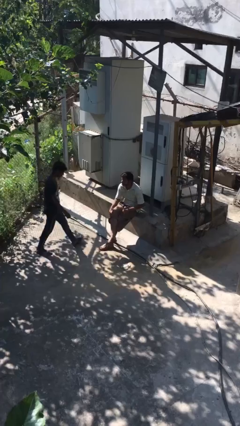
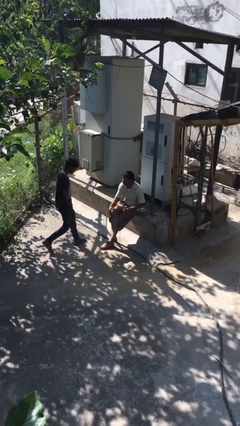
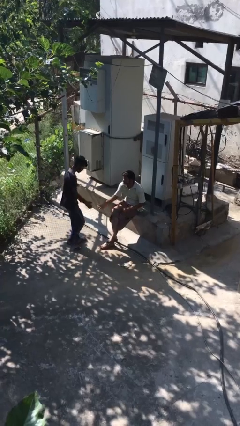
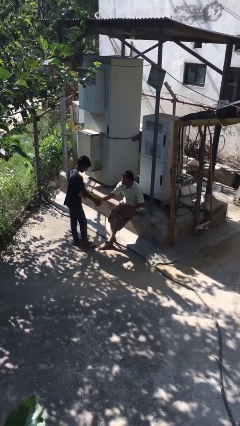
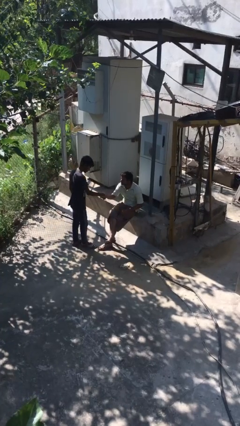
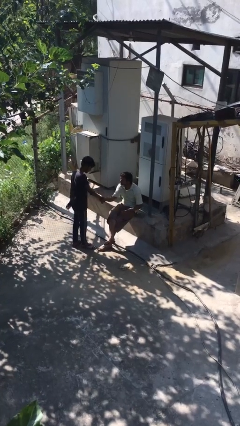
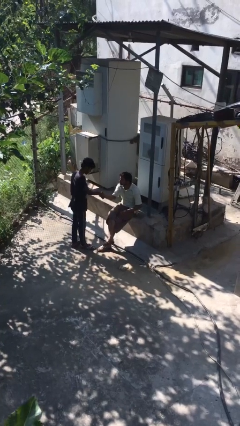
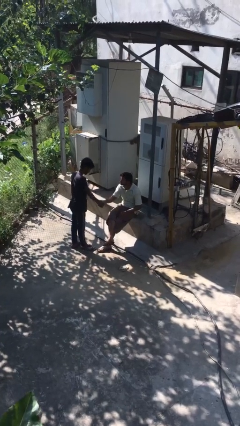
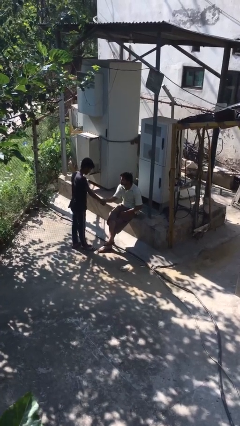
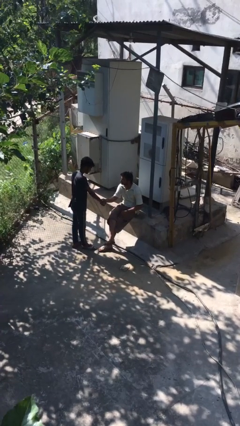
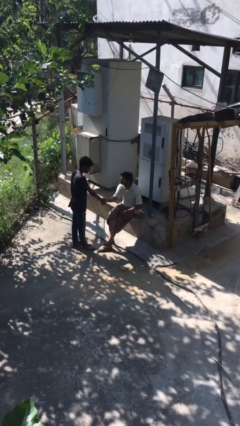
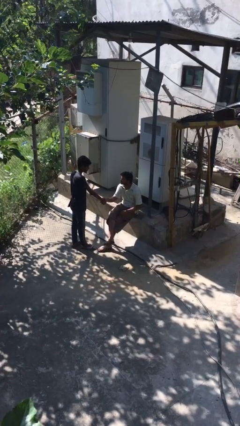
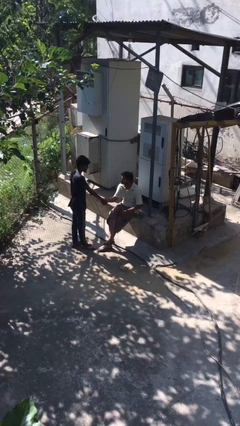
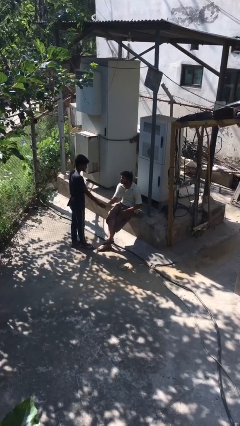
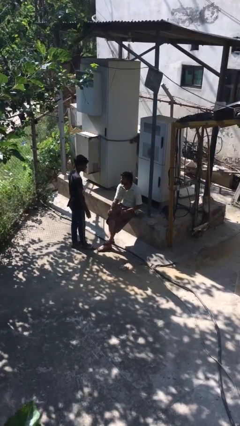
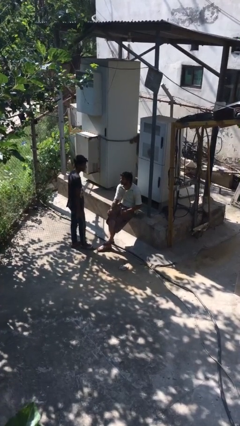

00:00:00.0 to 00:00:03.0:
person shakes hand

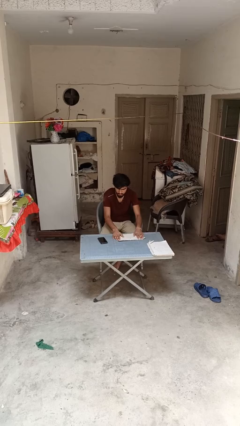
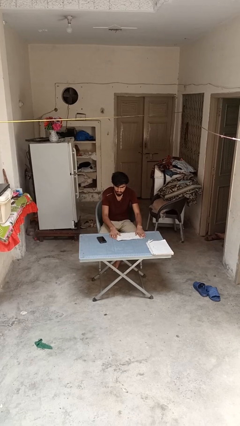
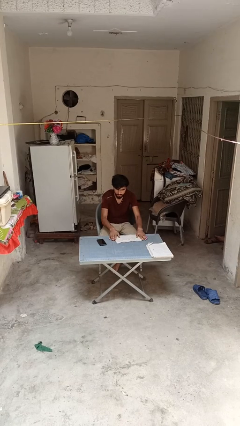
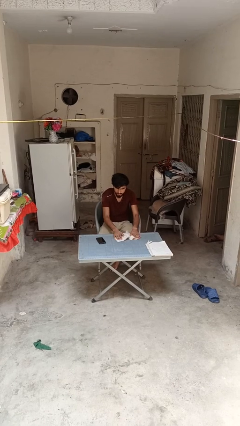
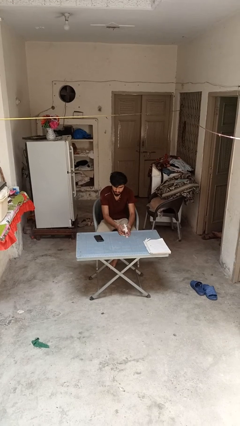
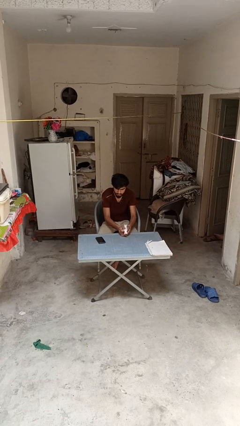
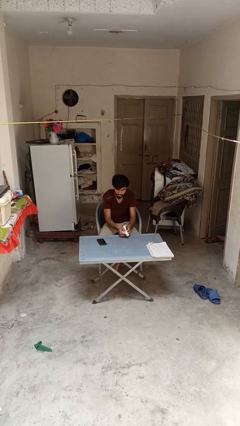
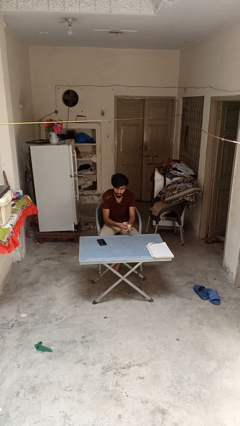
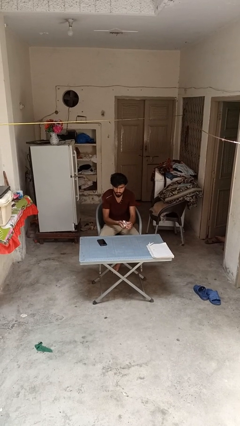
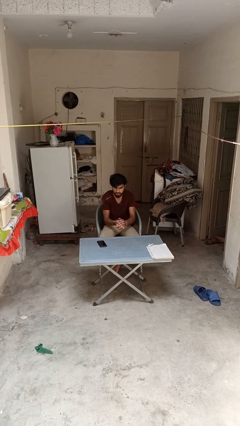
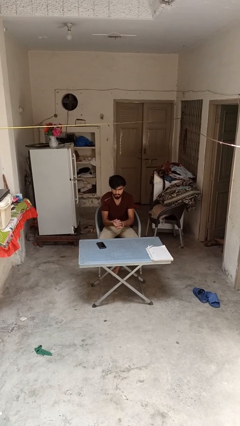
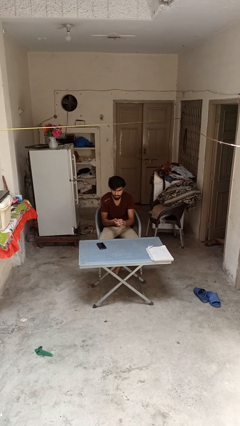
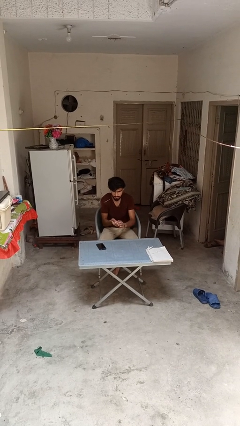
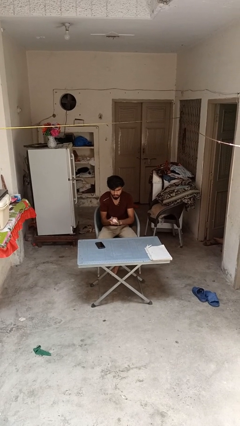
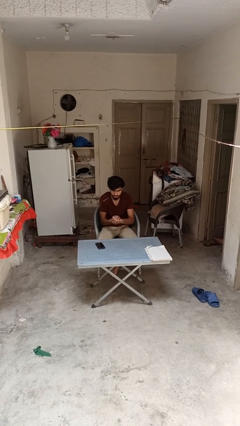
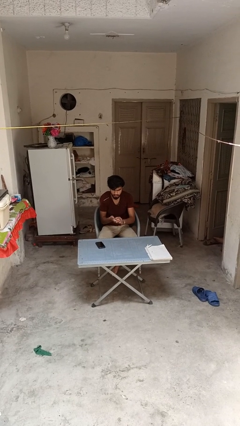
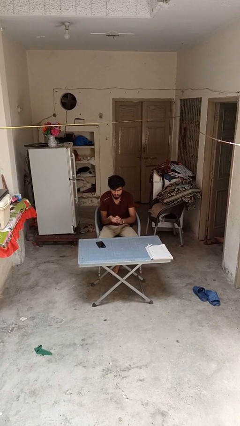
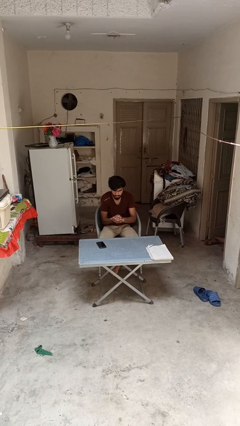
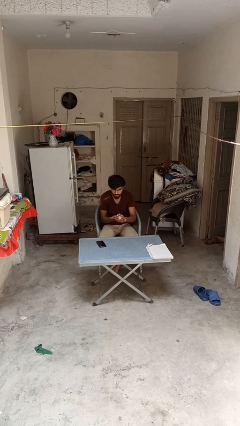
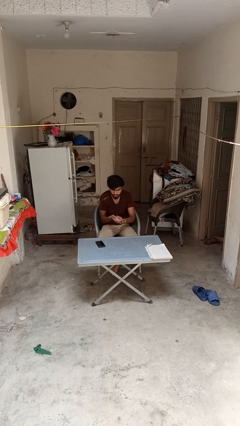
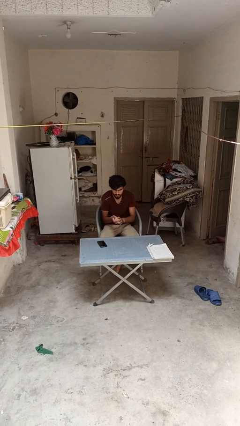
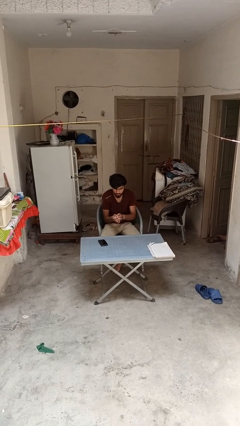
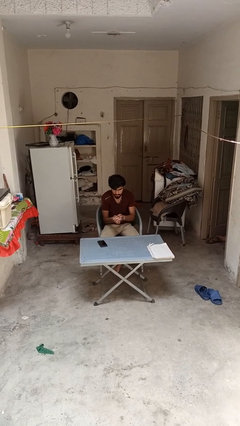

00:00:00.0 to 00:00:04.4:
person crumples paper

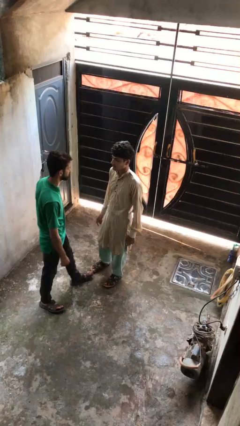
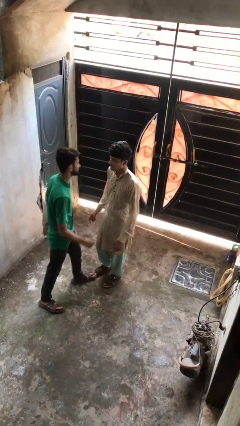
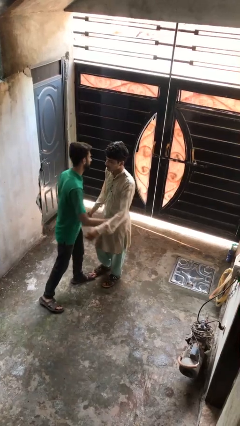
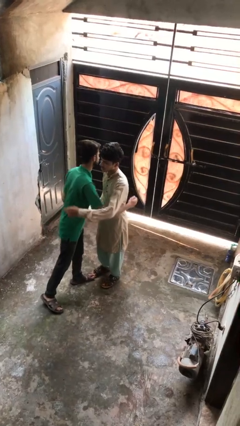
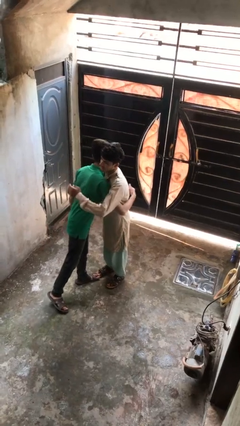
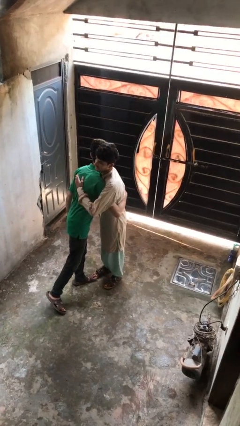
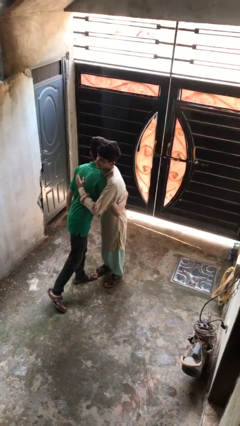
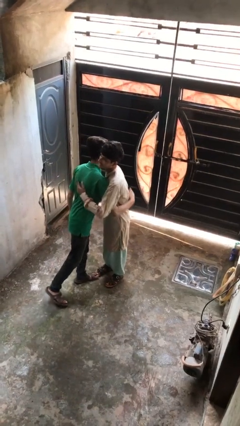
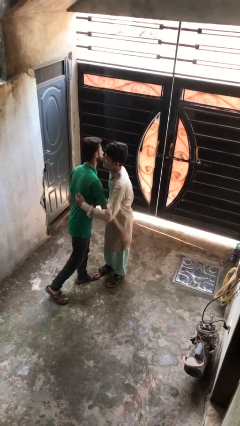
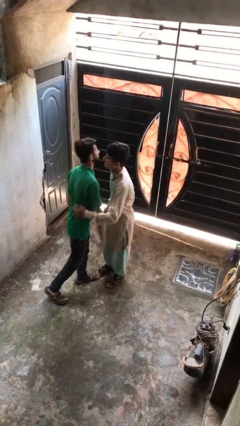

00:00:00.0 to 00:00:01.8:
person embraces person

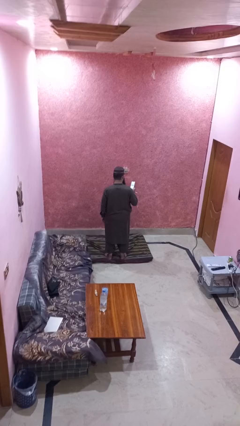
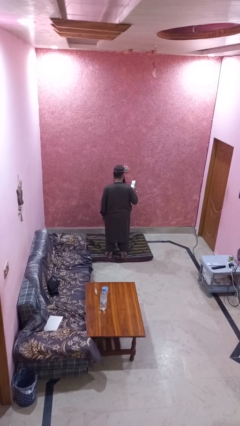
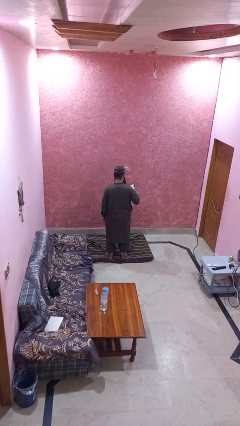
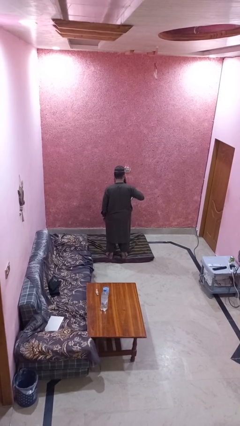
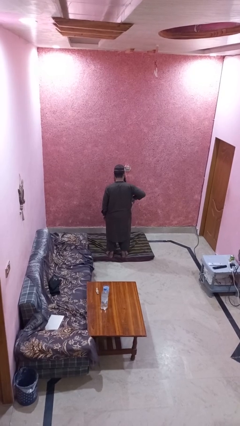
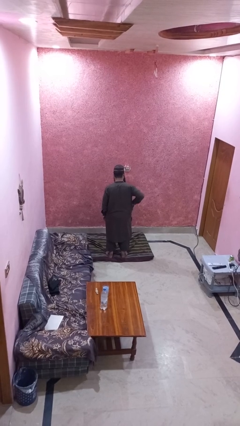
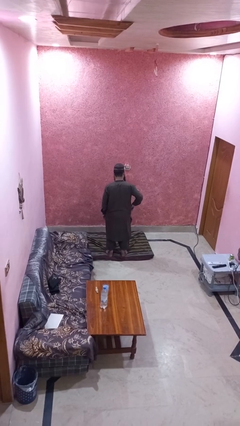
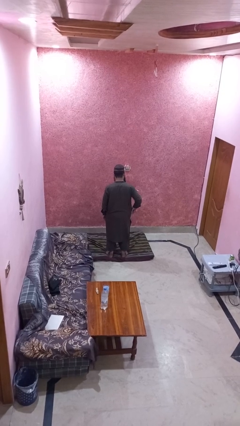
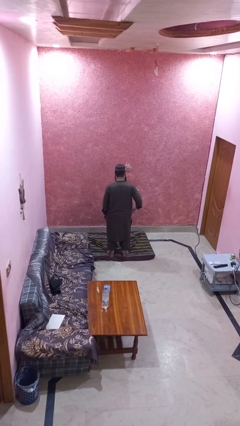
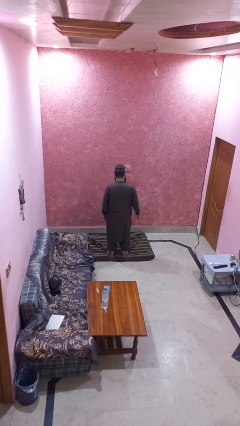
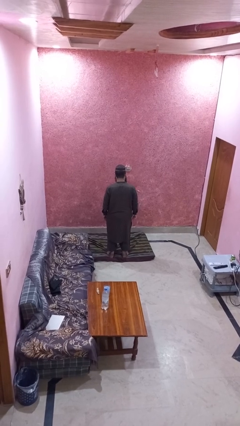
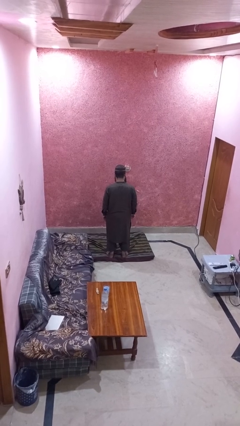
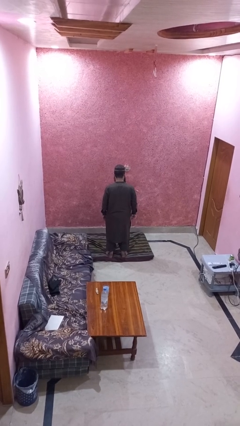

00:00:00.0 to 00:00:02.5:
person puts phone into pocket

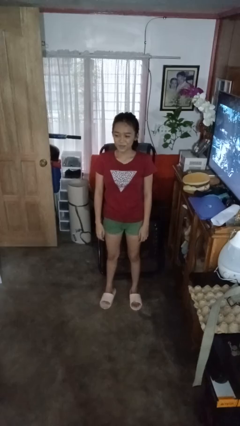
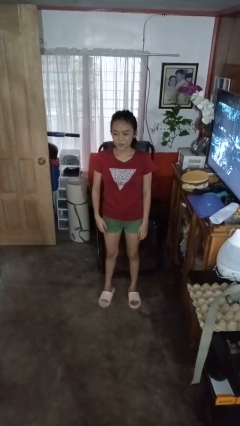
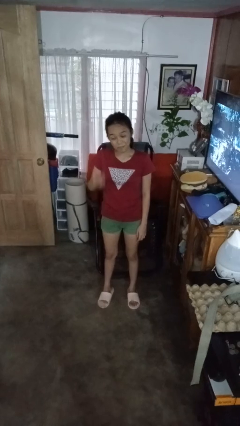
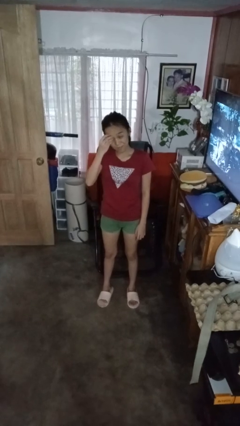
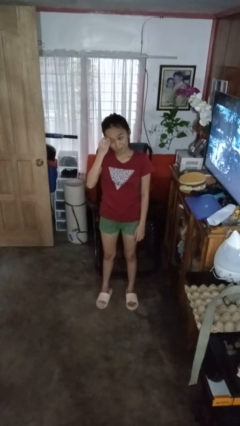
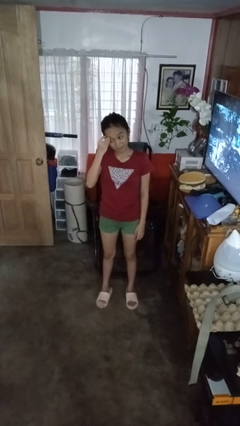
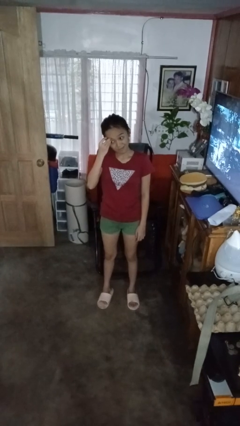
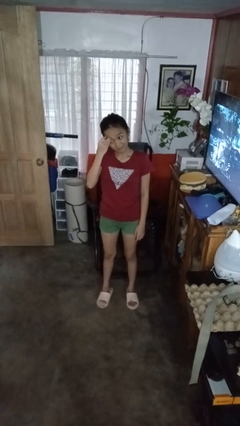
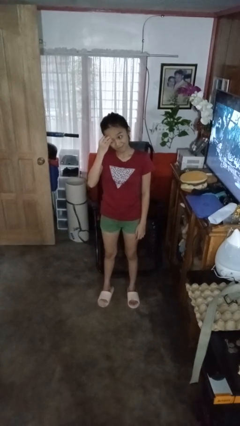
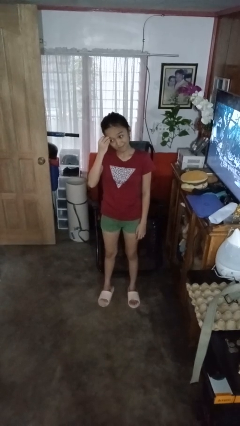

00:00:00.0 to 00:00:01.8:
person scratches face

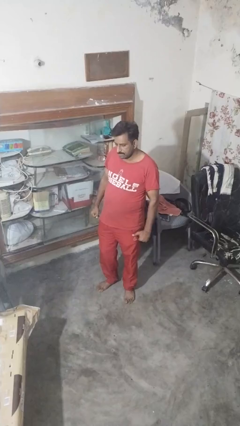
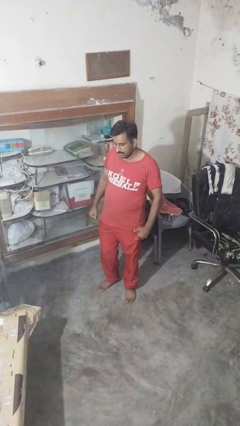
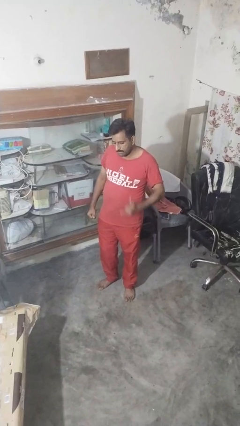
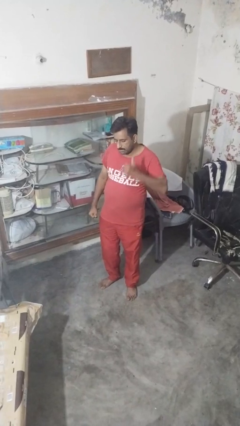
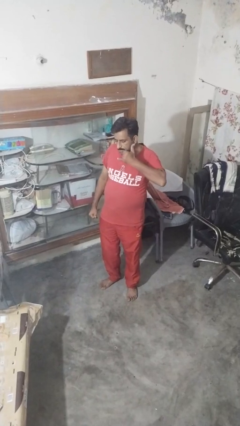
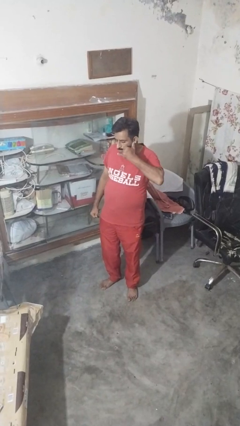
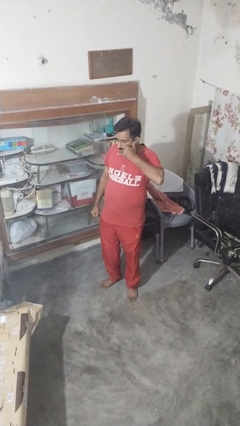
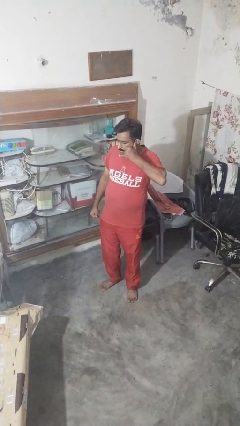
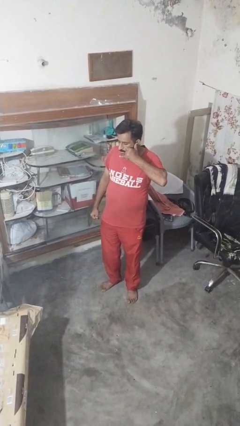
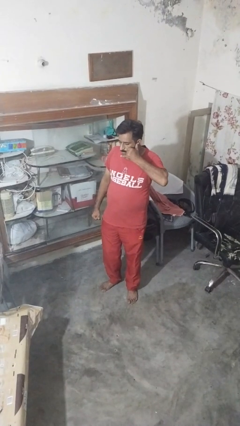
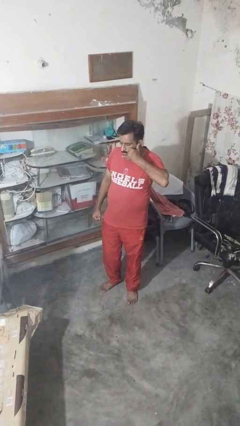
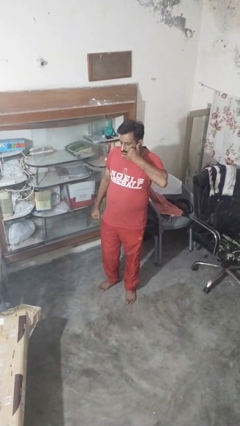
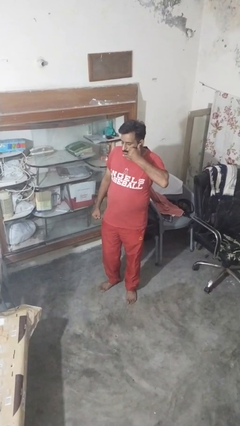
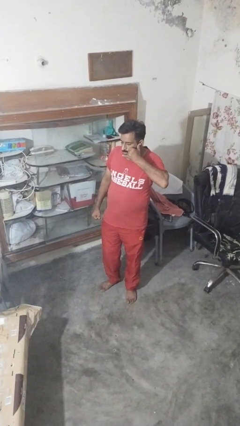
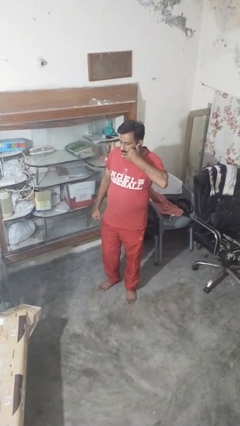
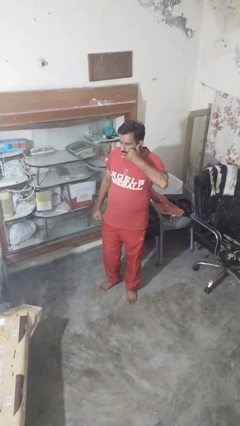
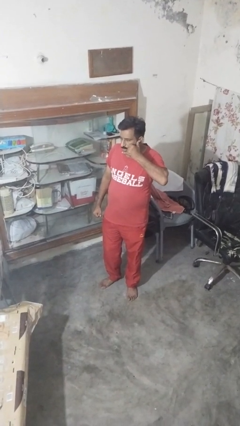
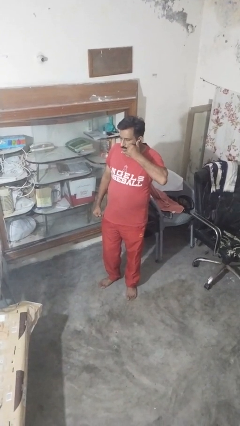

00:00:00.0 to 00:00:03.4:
person gestures call me

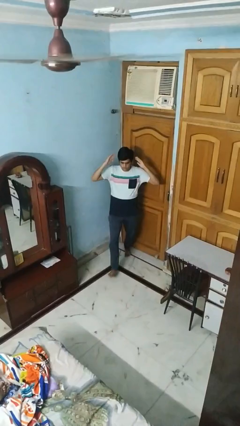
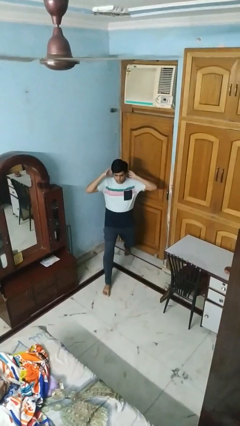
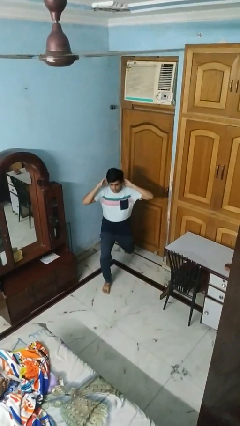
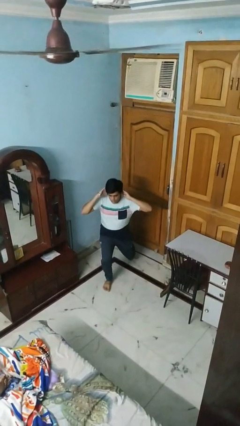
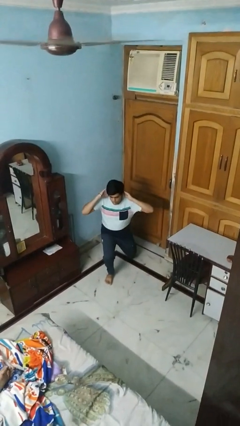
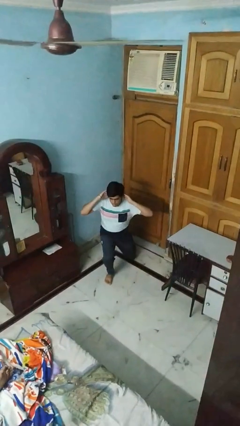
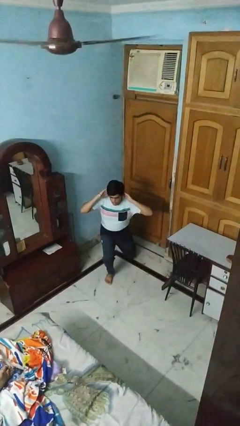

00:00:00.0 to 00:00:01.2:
person exercises with lunges
